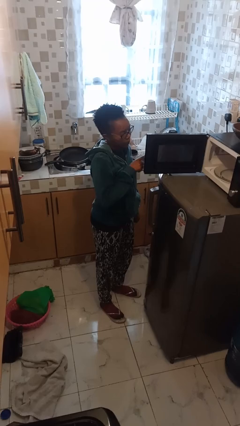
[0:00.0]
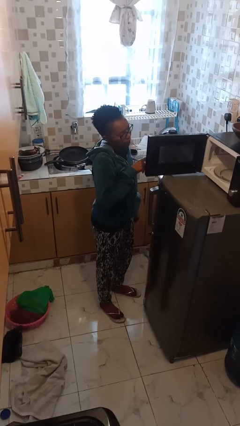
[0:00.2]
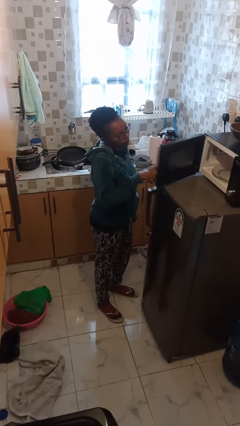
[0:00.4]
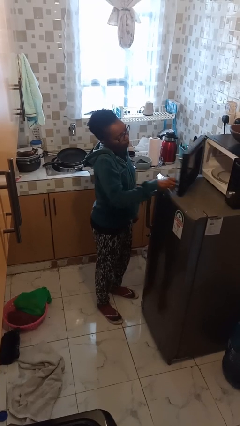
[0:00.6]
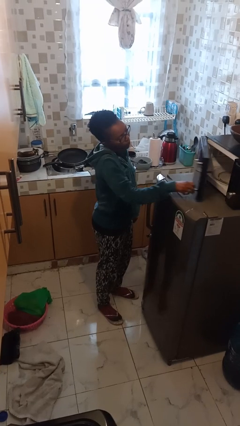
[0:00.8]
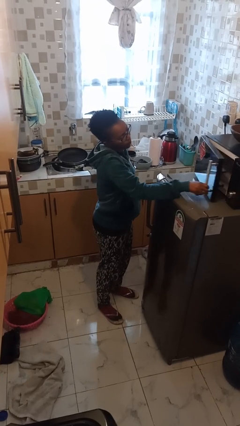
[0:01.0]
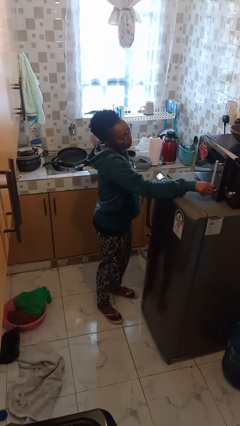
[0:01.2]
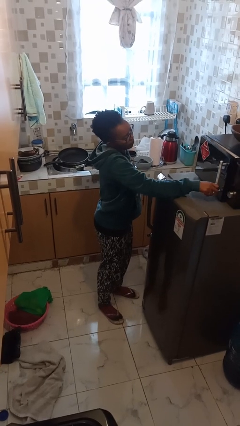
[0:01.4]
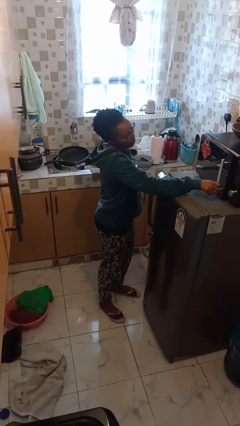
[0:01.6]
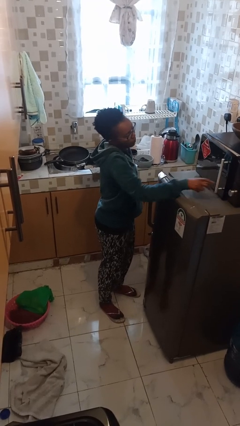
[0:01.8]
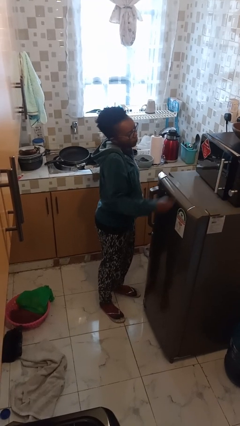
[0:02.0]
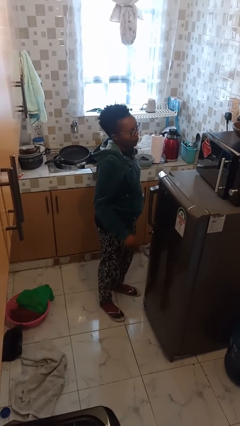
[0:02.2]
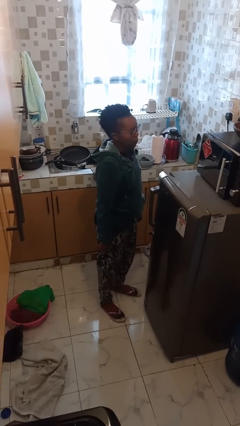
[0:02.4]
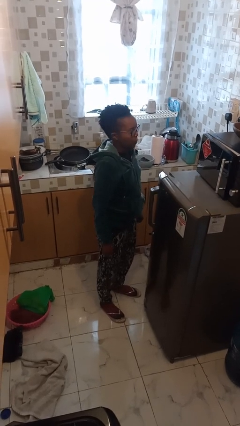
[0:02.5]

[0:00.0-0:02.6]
person closes microwave

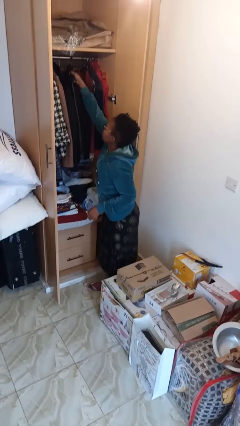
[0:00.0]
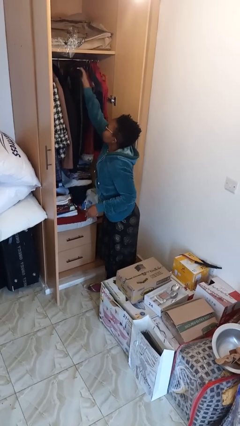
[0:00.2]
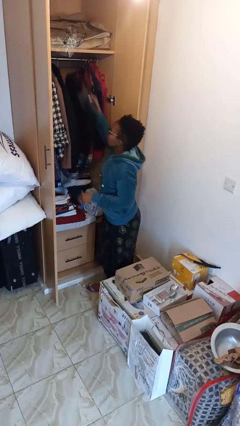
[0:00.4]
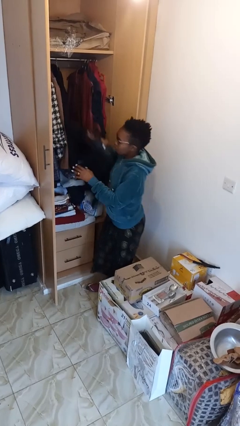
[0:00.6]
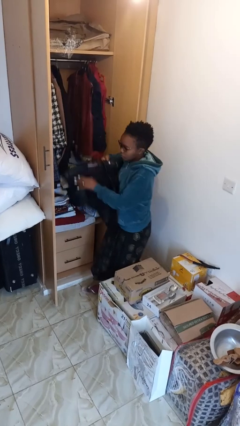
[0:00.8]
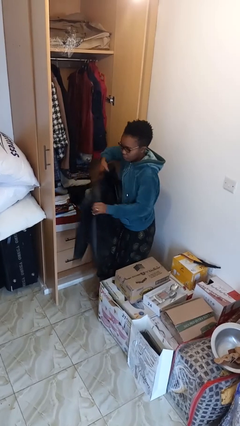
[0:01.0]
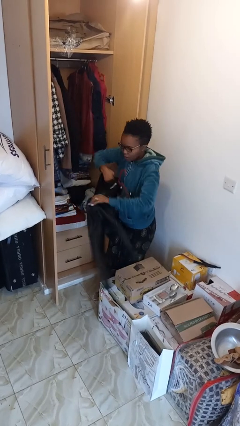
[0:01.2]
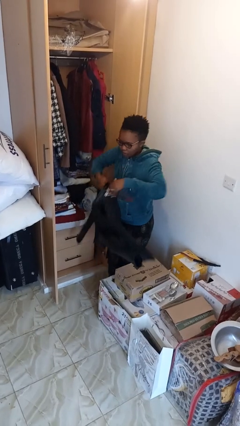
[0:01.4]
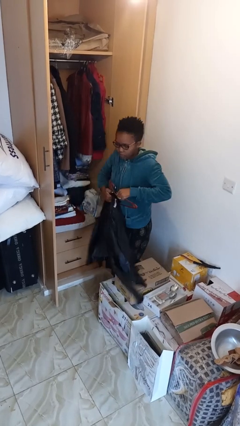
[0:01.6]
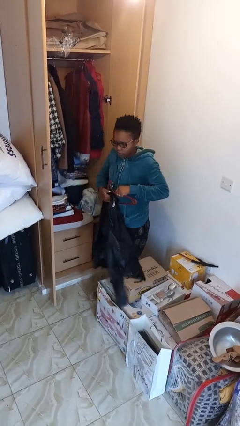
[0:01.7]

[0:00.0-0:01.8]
person takes clothes from closet

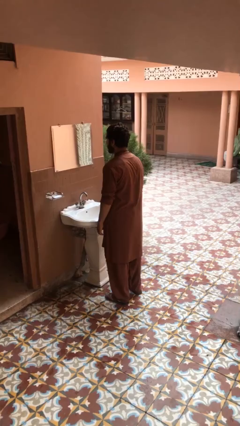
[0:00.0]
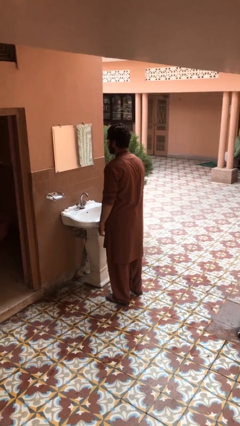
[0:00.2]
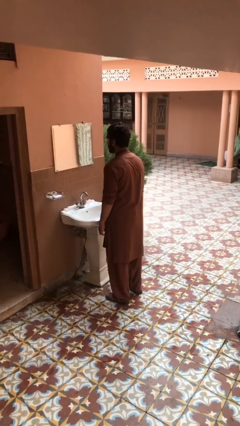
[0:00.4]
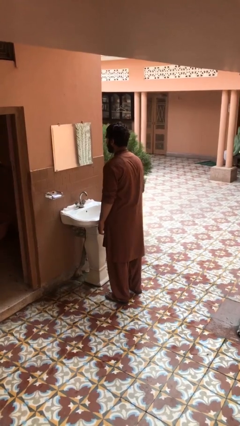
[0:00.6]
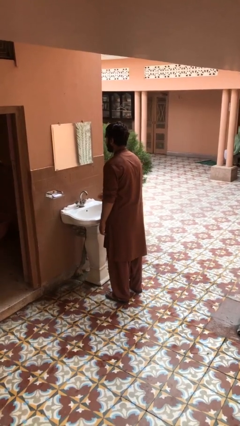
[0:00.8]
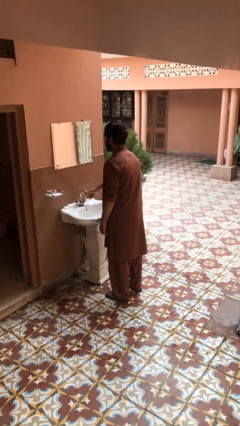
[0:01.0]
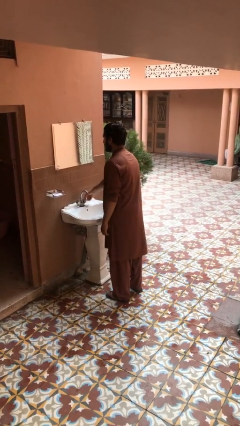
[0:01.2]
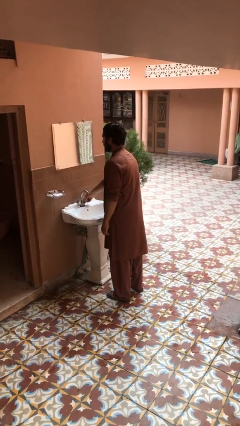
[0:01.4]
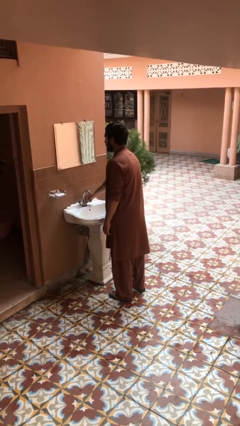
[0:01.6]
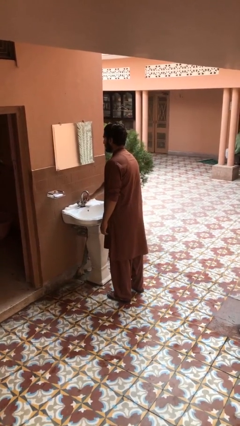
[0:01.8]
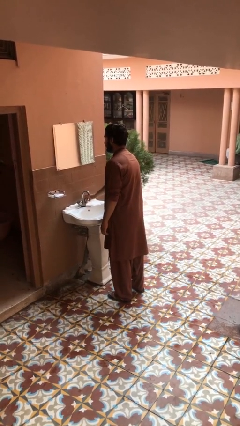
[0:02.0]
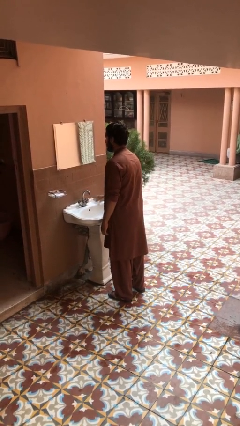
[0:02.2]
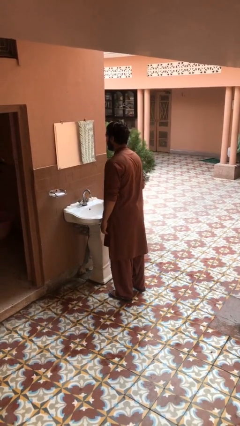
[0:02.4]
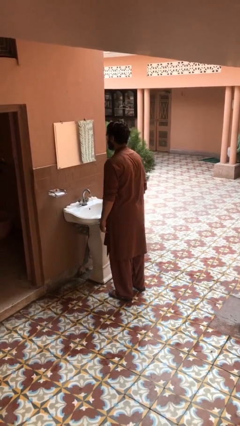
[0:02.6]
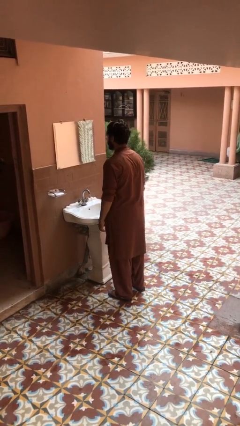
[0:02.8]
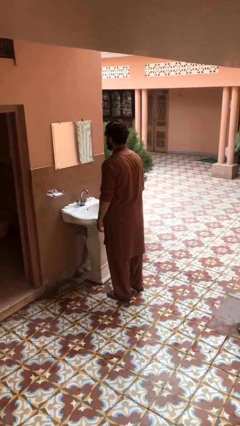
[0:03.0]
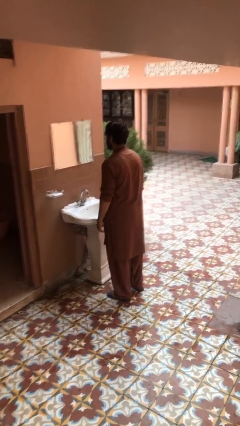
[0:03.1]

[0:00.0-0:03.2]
person turns on faucet

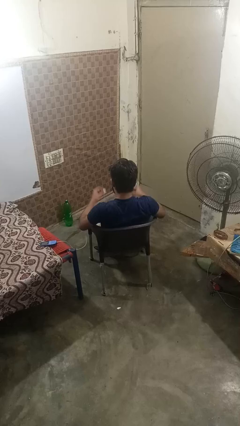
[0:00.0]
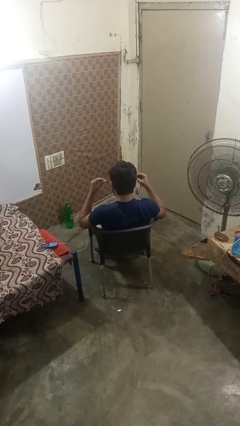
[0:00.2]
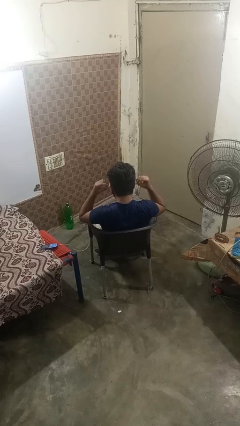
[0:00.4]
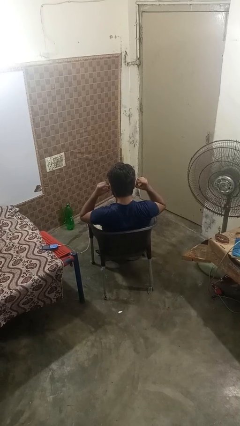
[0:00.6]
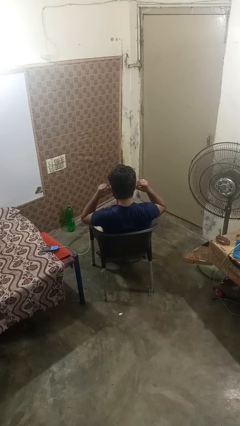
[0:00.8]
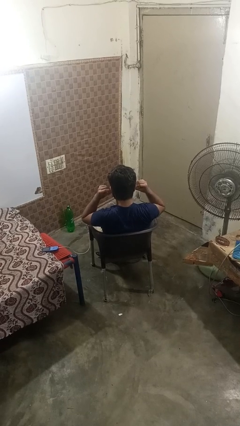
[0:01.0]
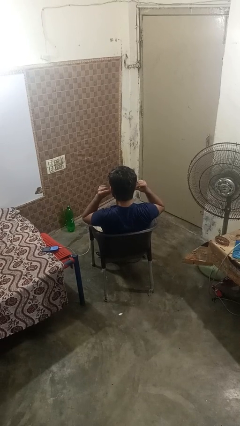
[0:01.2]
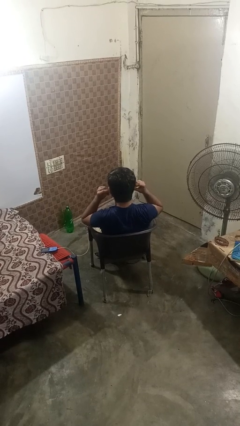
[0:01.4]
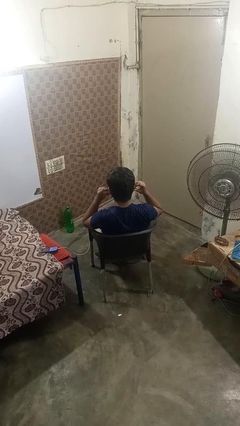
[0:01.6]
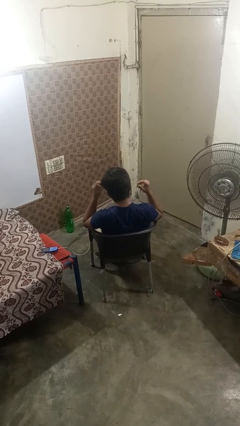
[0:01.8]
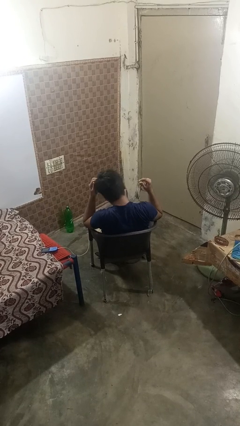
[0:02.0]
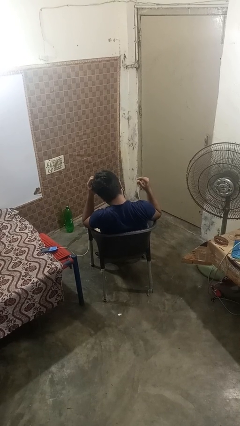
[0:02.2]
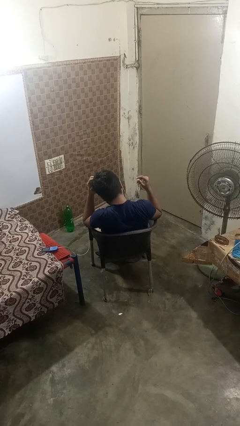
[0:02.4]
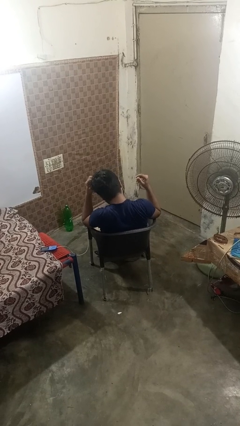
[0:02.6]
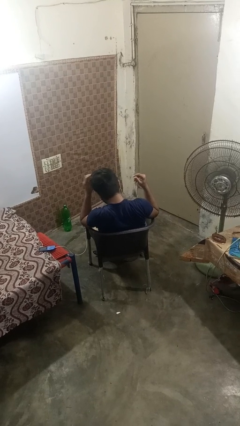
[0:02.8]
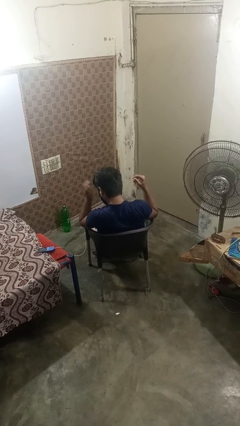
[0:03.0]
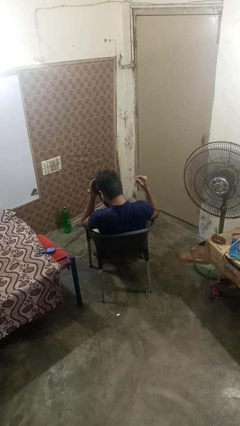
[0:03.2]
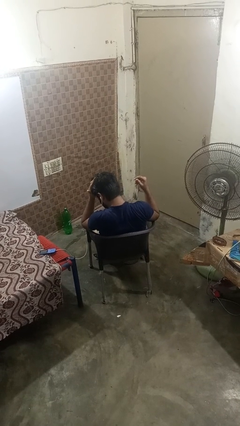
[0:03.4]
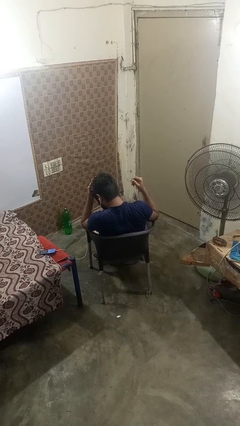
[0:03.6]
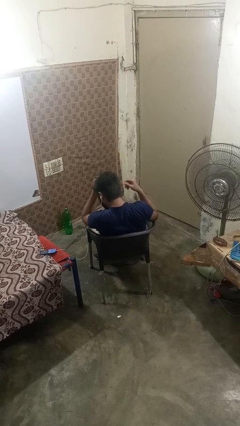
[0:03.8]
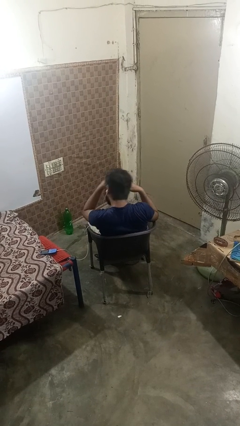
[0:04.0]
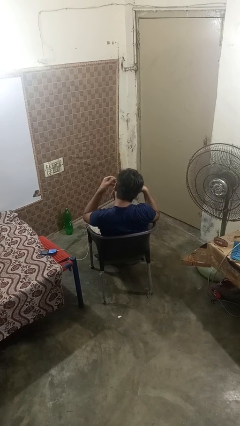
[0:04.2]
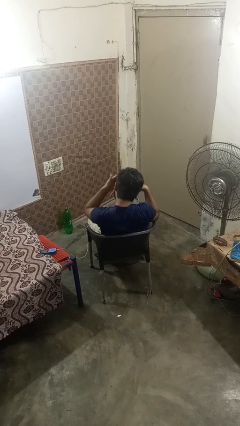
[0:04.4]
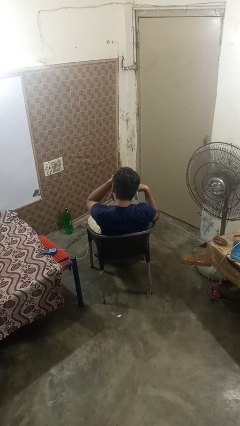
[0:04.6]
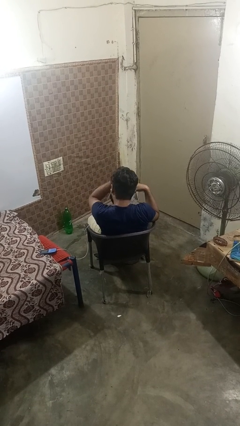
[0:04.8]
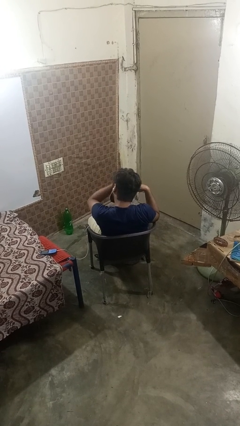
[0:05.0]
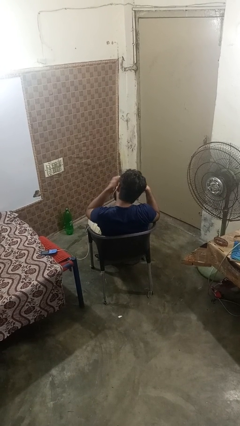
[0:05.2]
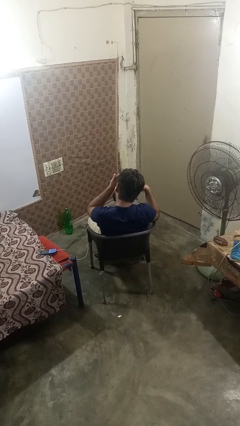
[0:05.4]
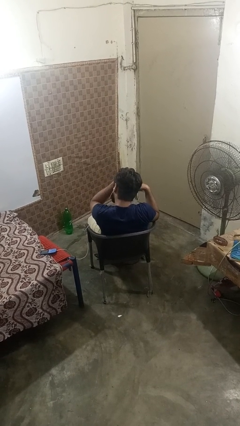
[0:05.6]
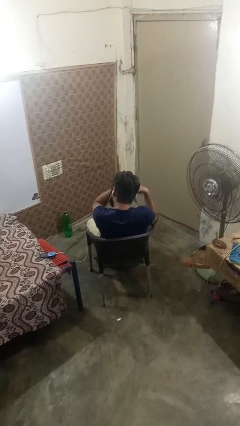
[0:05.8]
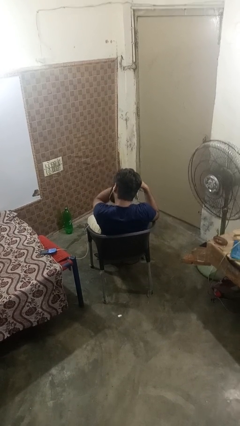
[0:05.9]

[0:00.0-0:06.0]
person puts on headphones

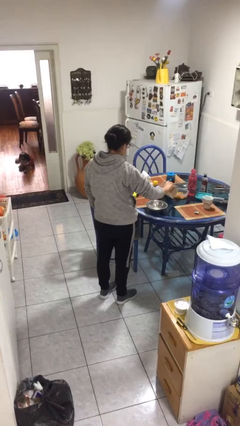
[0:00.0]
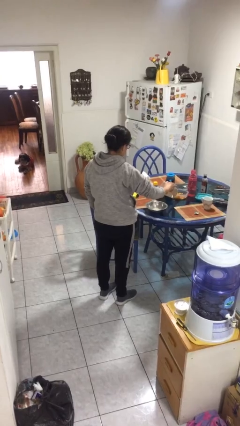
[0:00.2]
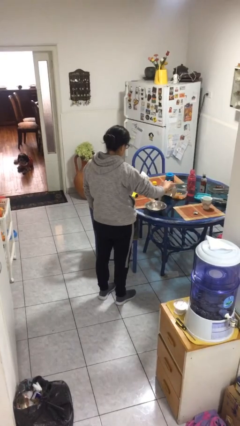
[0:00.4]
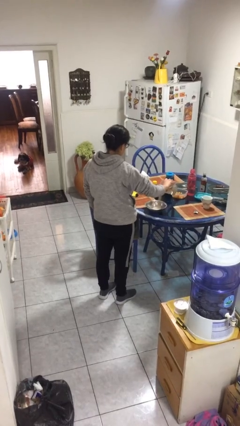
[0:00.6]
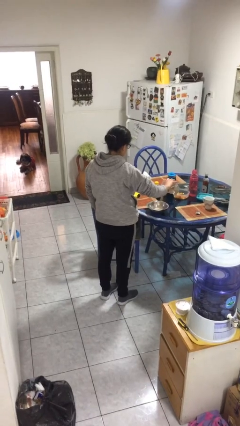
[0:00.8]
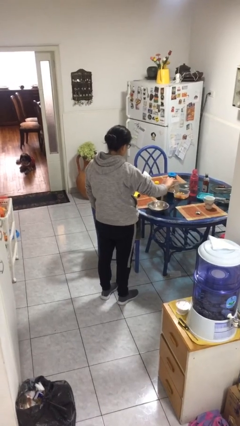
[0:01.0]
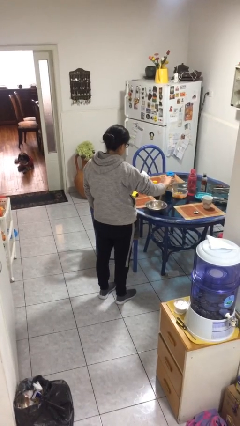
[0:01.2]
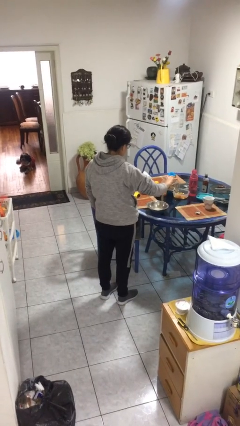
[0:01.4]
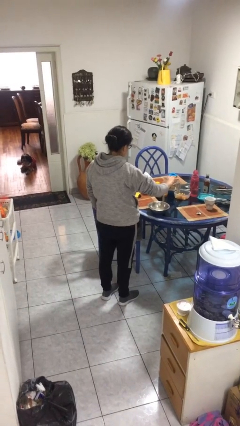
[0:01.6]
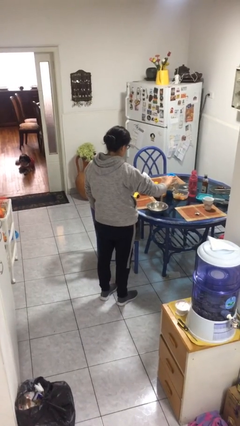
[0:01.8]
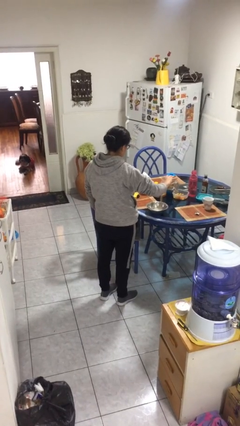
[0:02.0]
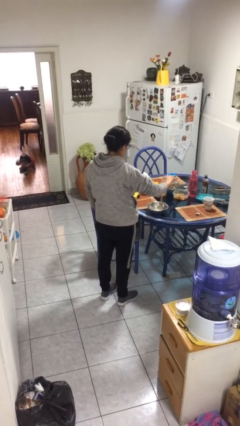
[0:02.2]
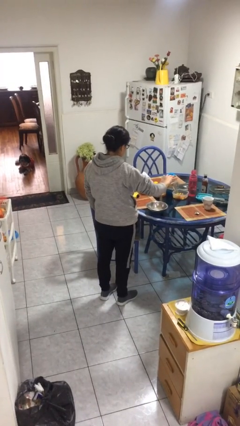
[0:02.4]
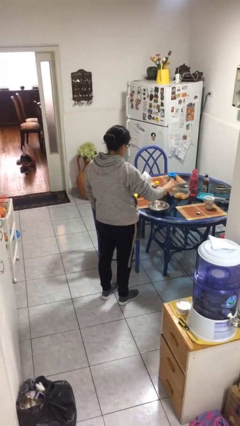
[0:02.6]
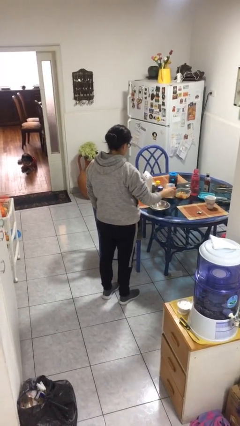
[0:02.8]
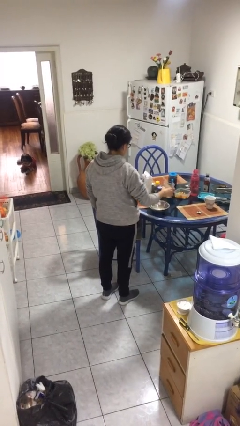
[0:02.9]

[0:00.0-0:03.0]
person pours into bowl

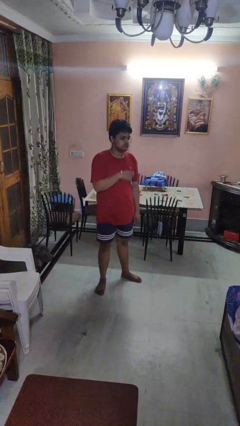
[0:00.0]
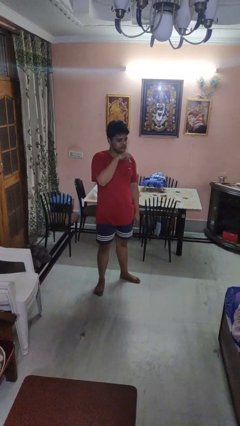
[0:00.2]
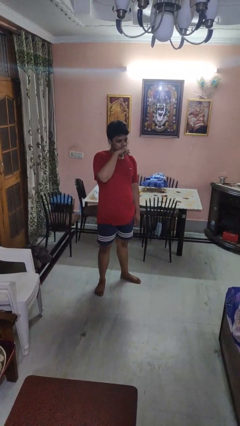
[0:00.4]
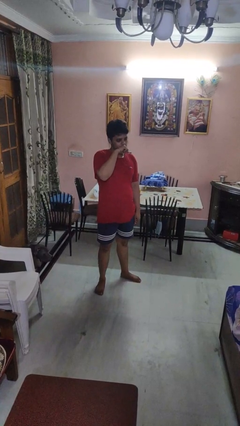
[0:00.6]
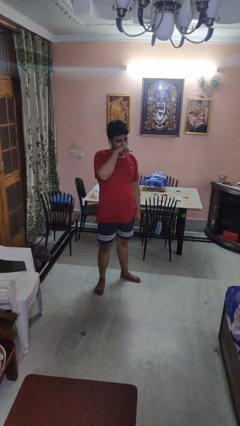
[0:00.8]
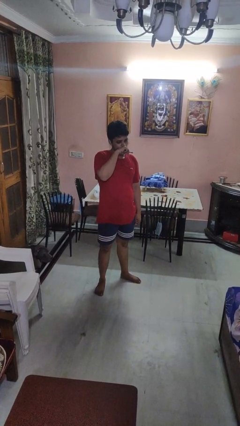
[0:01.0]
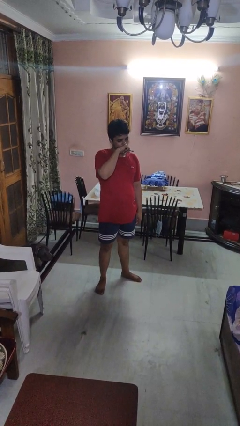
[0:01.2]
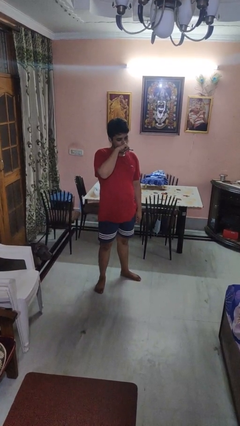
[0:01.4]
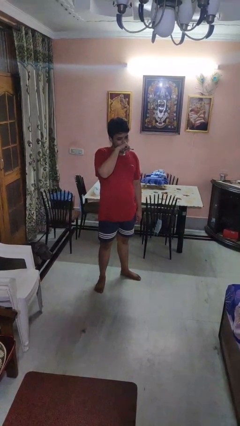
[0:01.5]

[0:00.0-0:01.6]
person vapes
